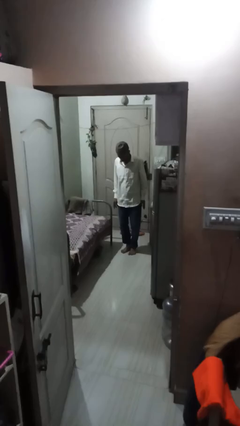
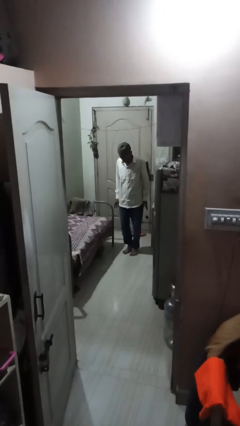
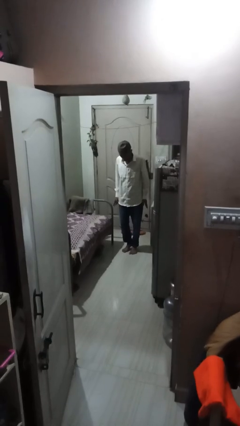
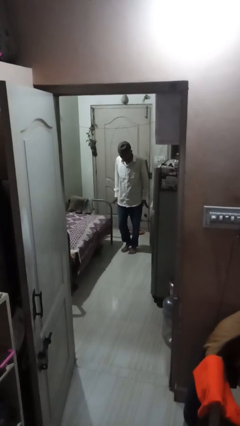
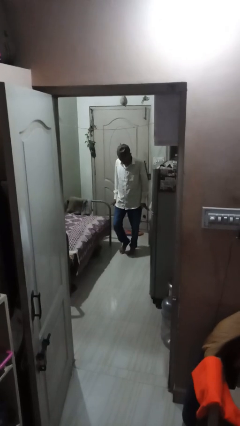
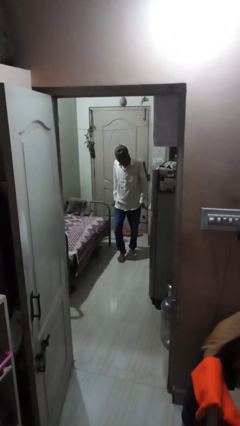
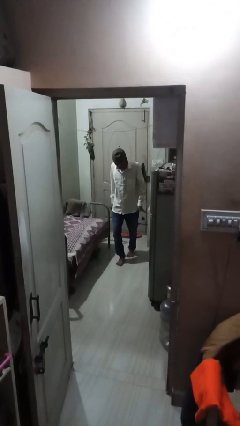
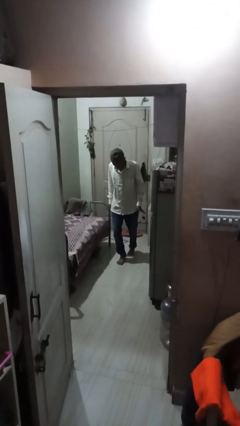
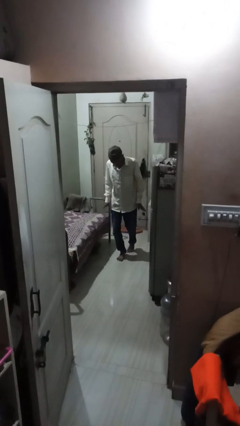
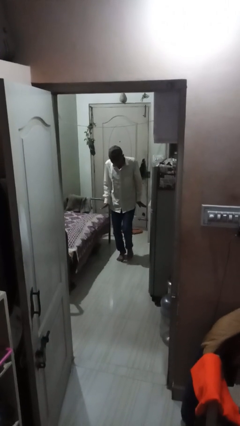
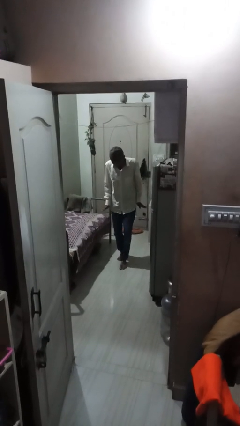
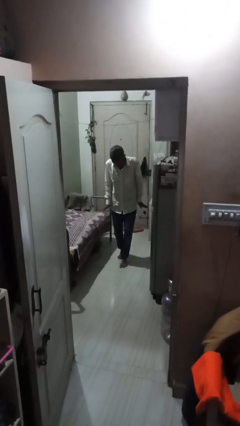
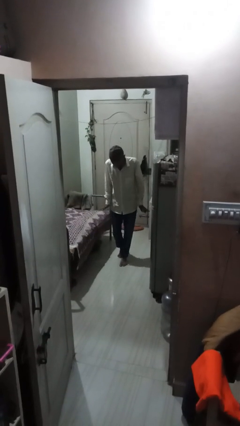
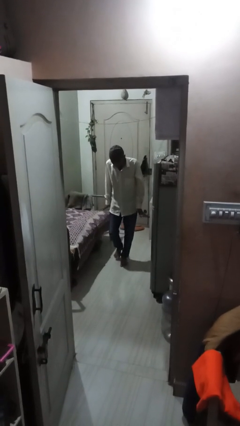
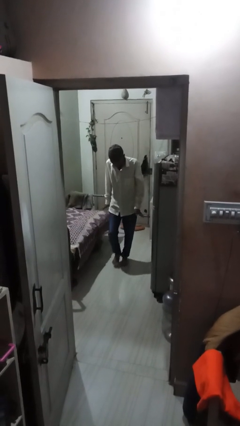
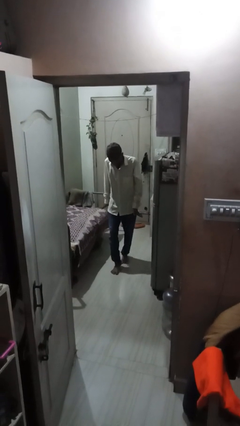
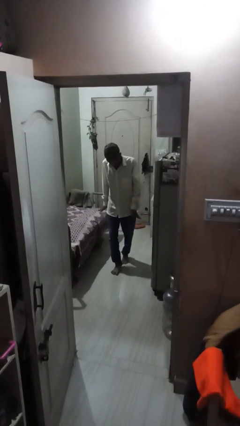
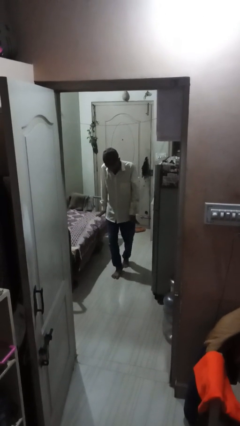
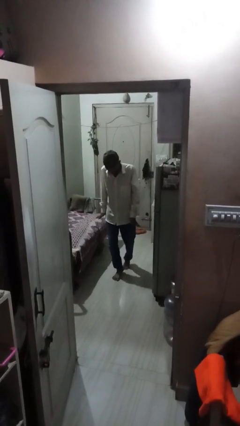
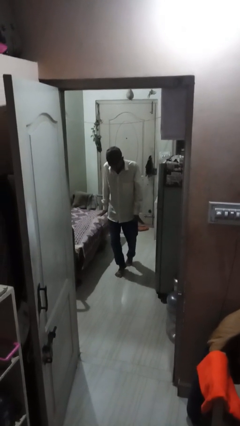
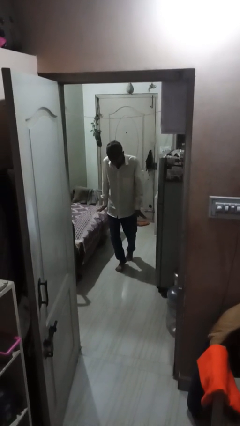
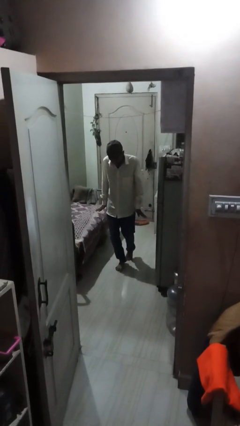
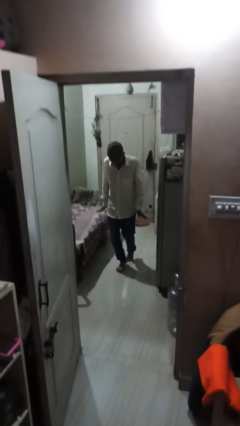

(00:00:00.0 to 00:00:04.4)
person walks tiptoe

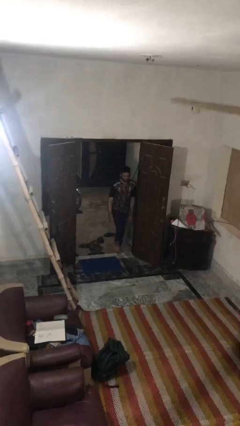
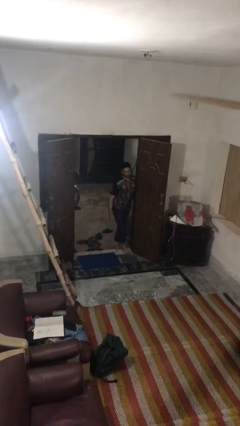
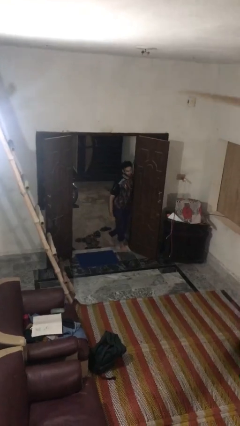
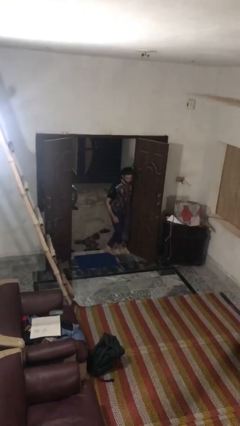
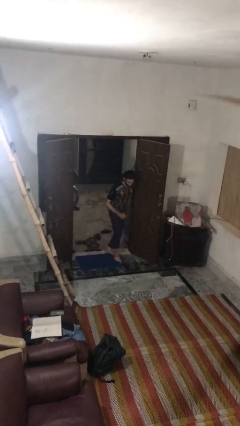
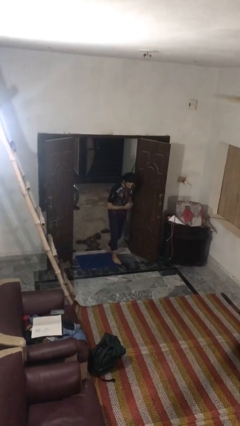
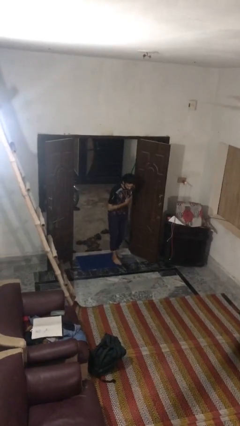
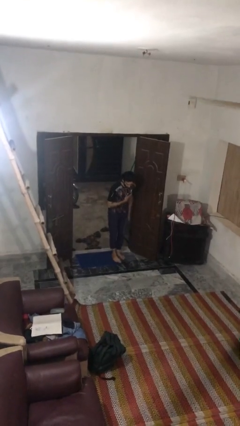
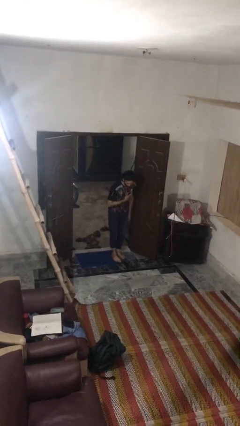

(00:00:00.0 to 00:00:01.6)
person bumps into wall

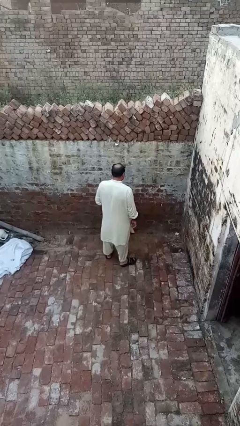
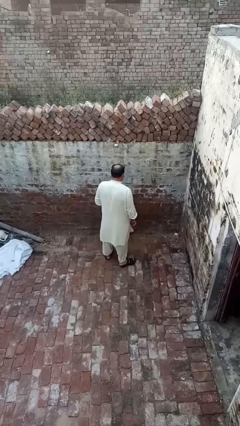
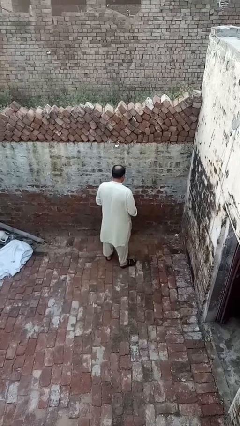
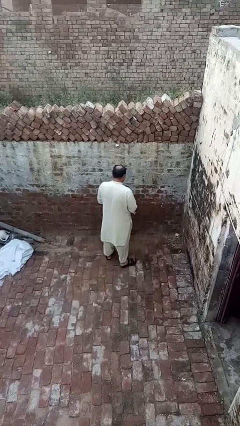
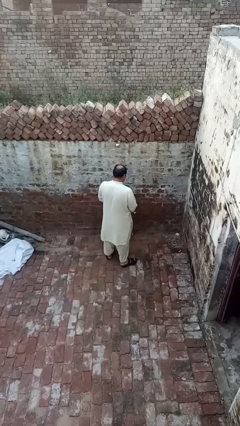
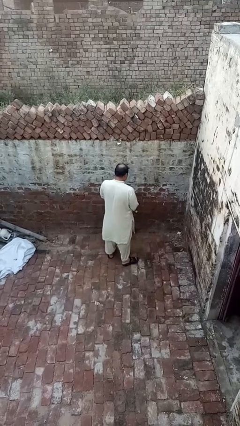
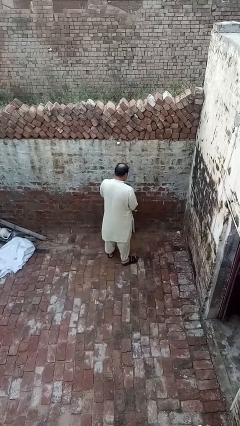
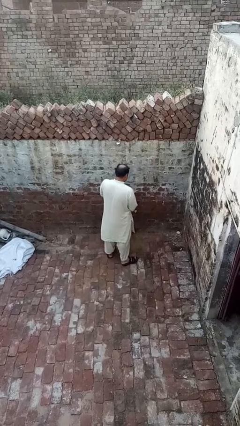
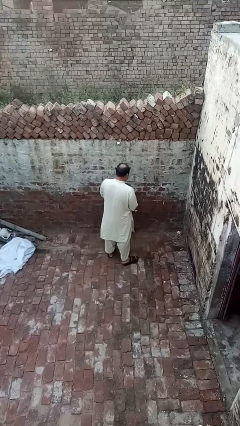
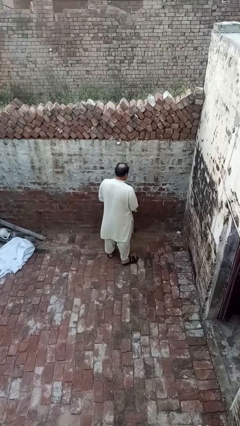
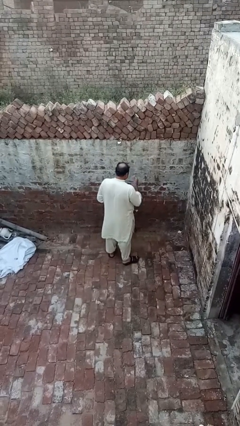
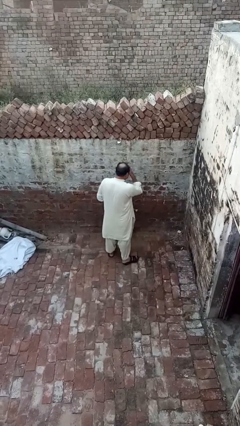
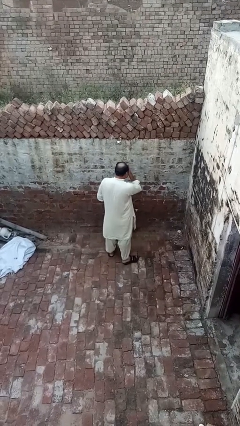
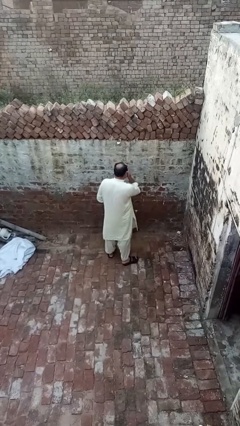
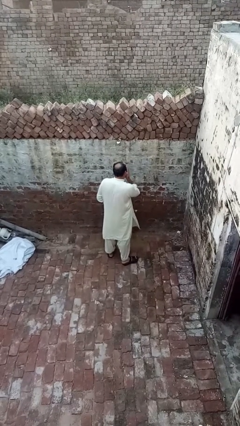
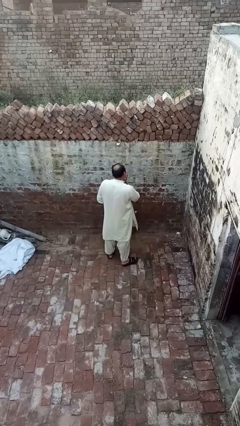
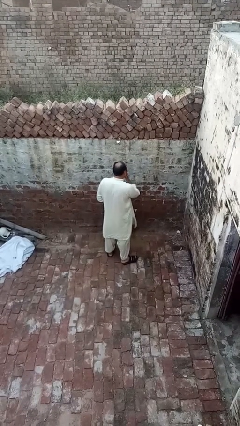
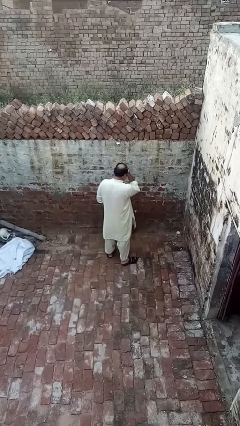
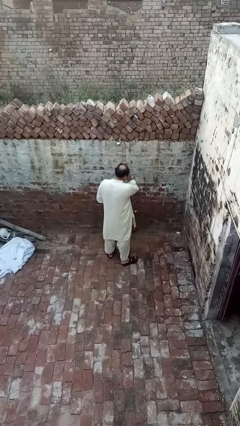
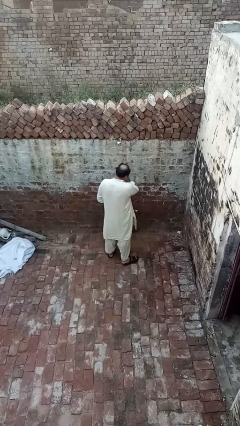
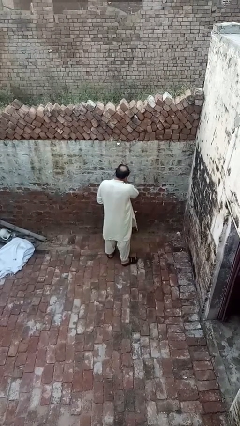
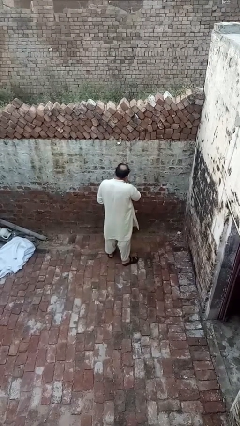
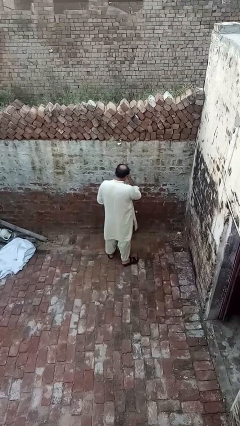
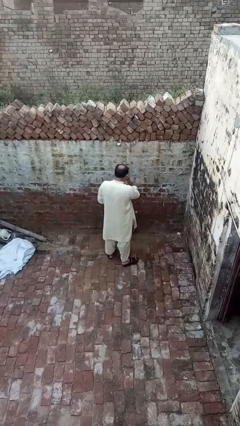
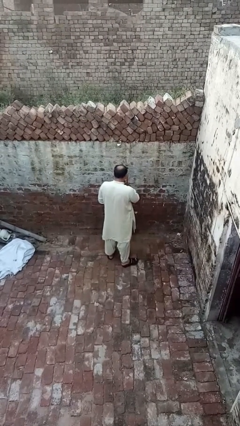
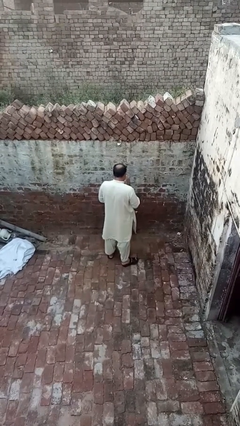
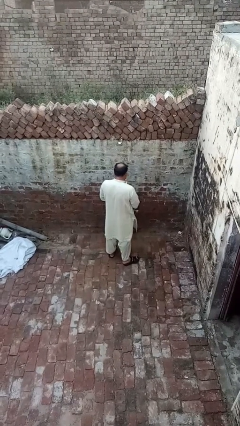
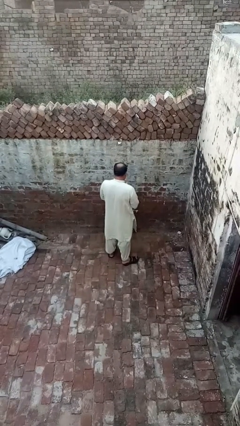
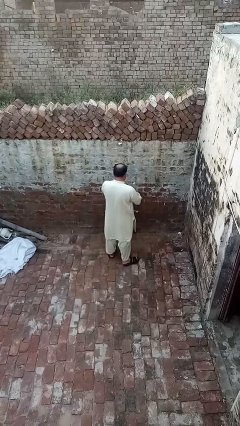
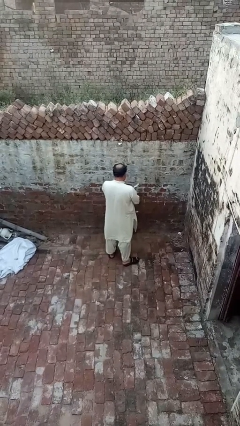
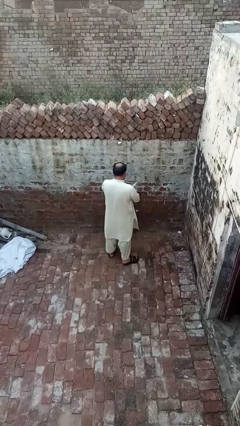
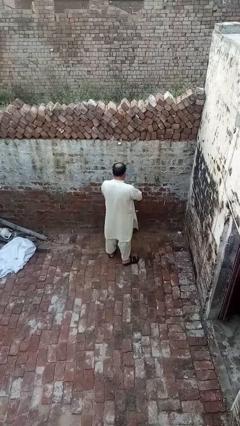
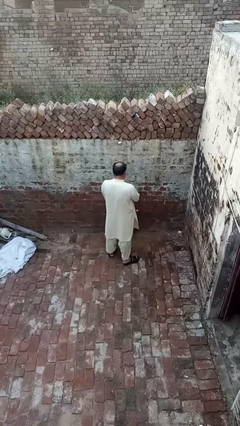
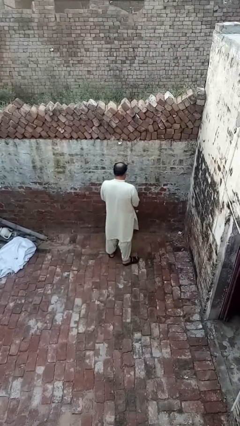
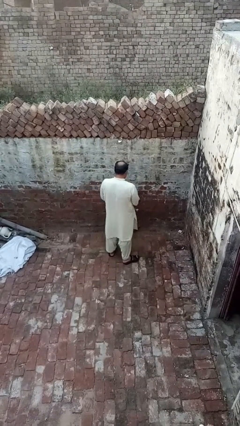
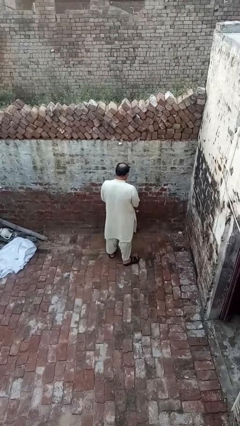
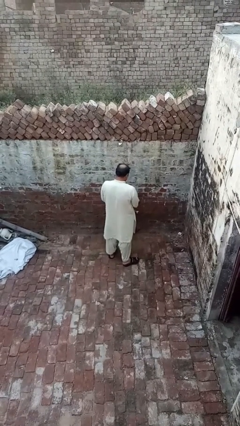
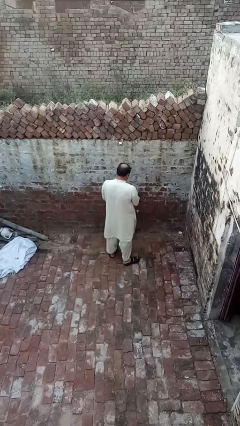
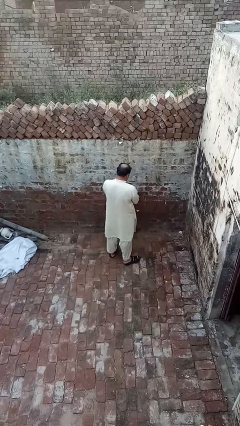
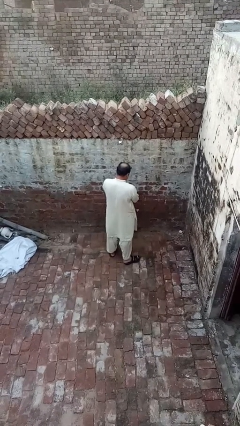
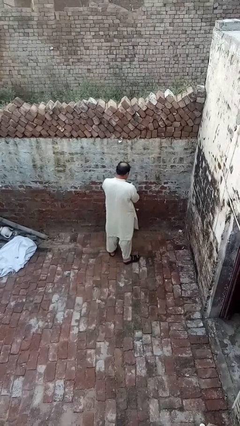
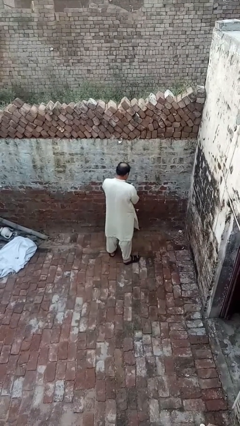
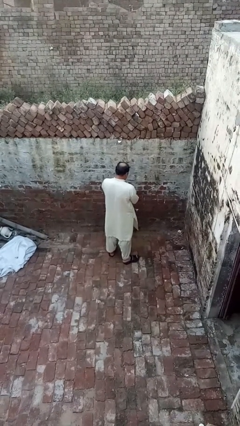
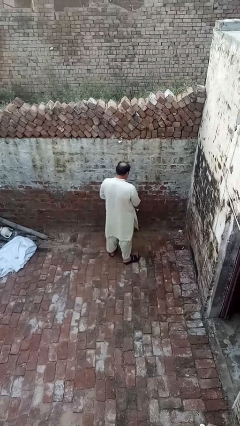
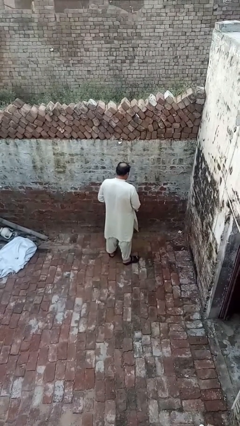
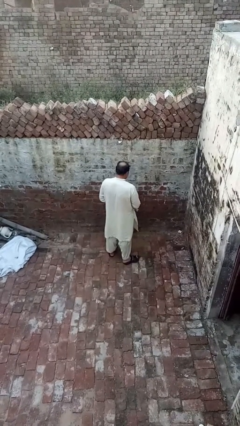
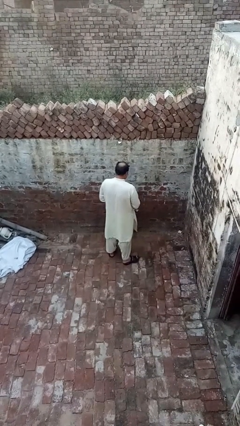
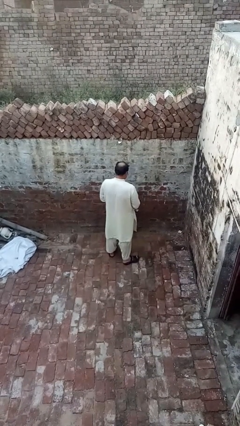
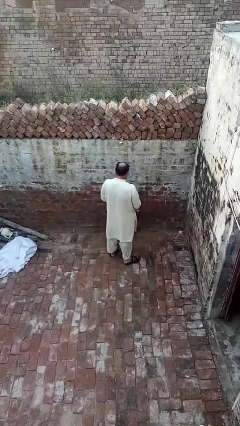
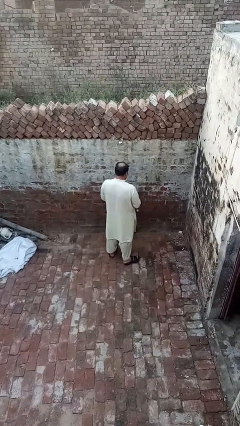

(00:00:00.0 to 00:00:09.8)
person applies sunscreen

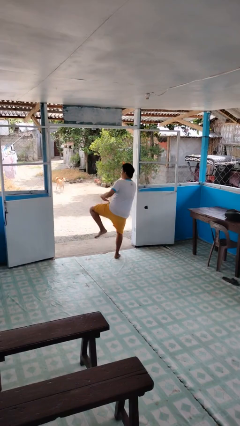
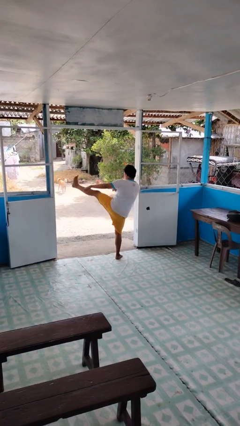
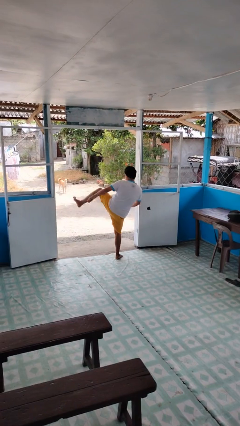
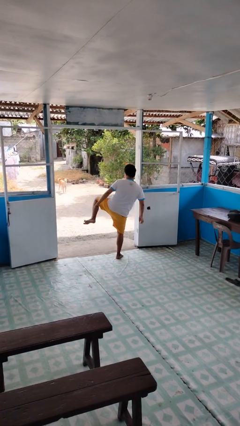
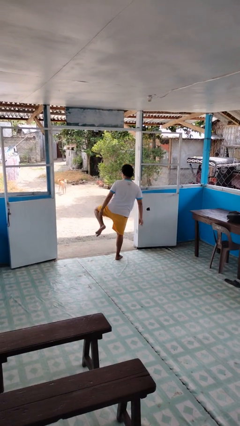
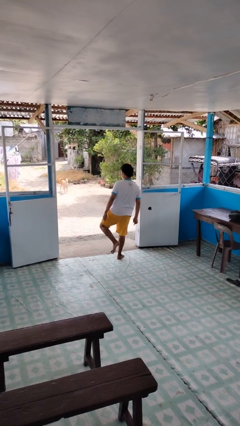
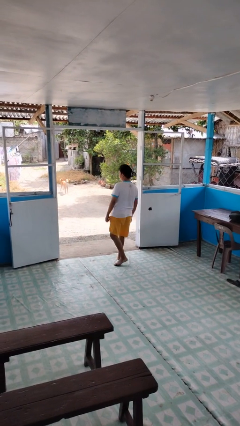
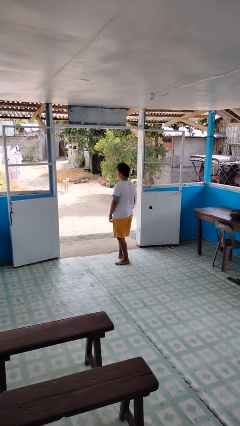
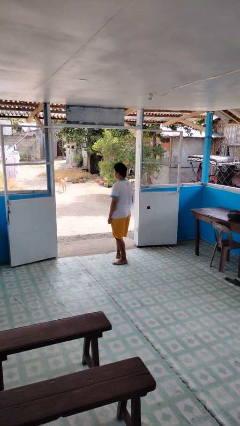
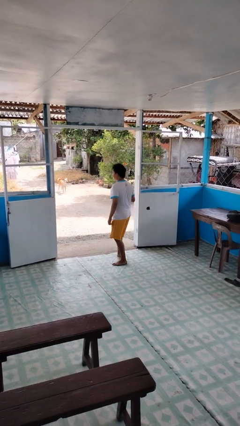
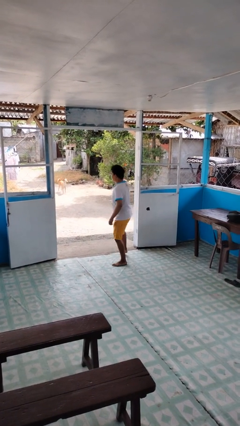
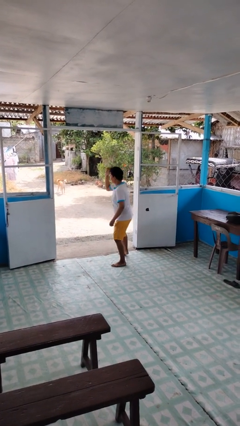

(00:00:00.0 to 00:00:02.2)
person karate kicks
